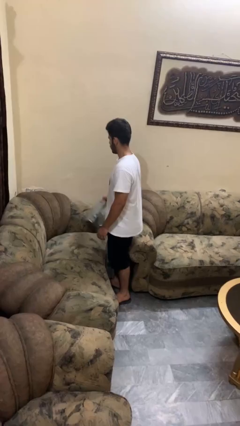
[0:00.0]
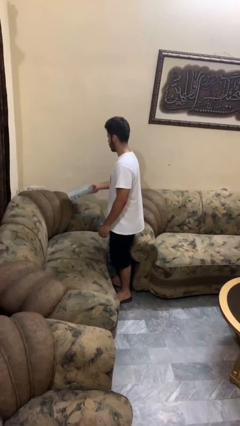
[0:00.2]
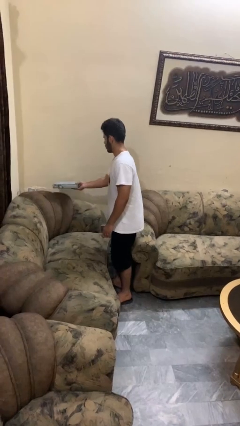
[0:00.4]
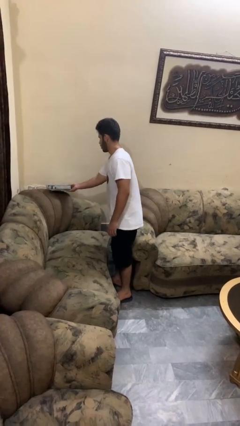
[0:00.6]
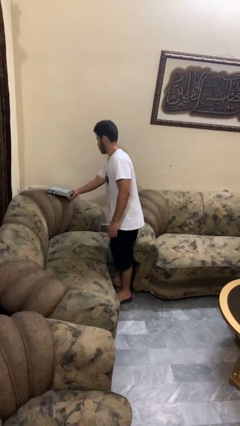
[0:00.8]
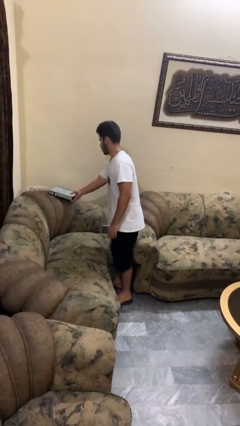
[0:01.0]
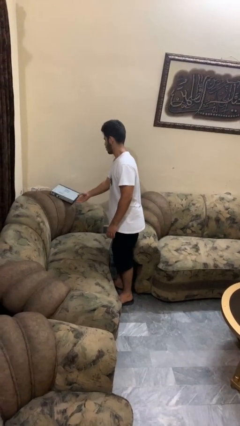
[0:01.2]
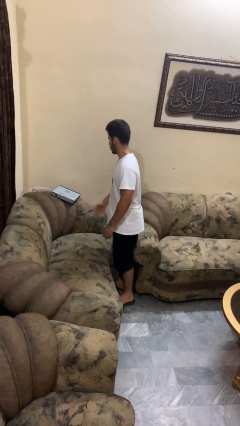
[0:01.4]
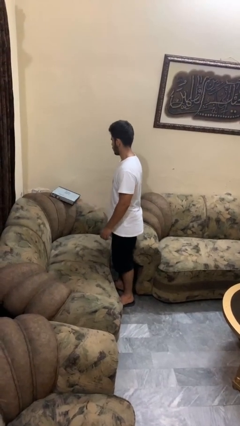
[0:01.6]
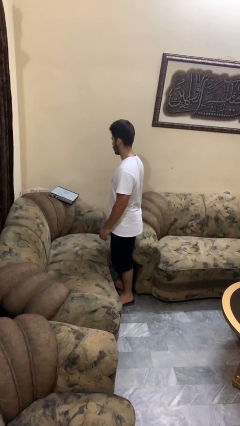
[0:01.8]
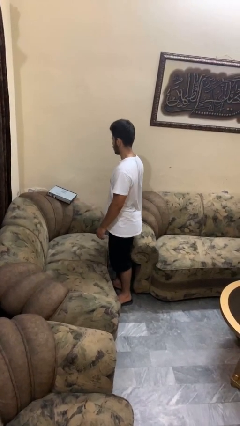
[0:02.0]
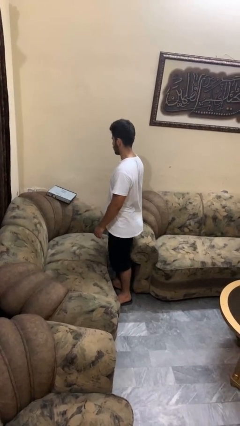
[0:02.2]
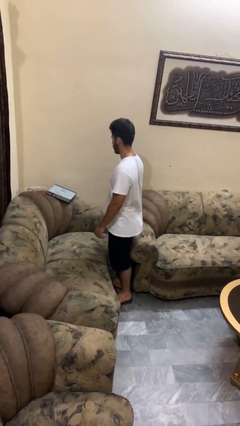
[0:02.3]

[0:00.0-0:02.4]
person puts down object on couch

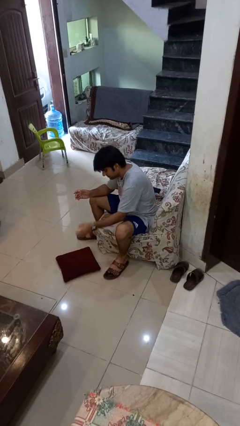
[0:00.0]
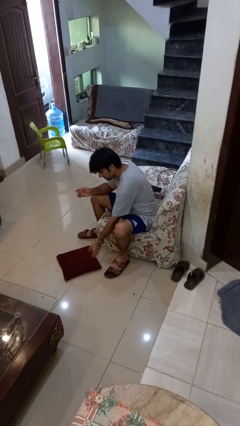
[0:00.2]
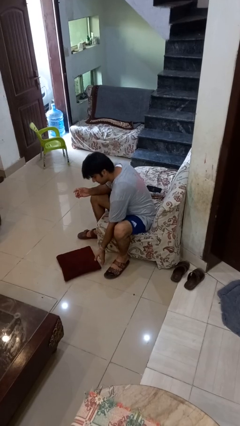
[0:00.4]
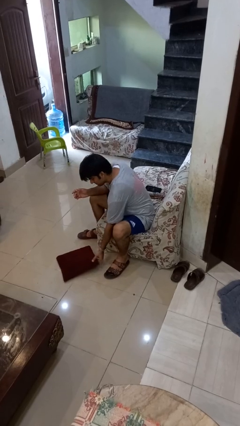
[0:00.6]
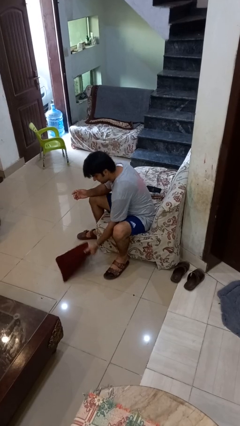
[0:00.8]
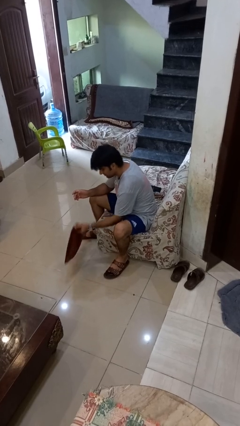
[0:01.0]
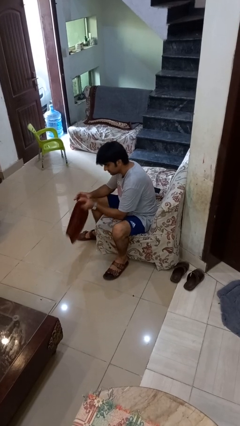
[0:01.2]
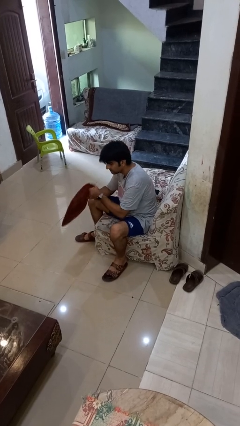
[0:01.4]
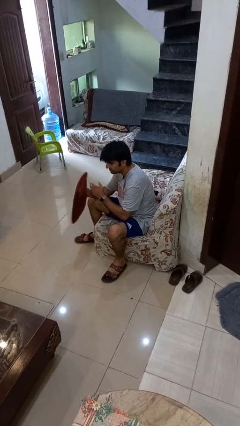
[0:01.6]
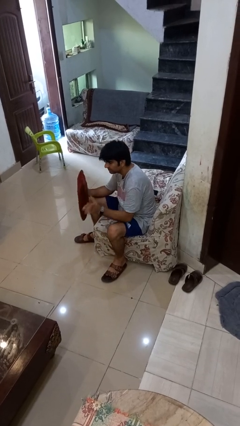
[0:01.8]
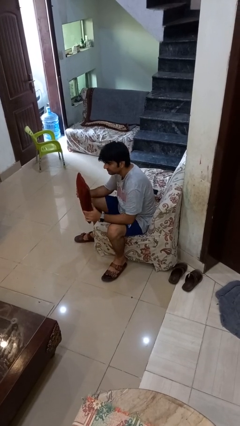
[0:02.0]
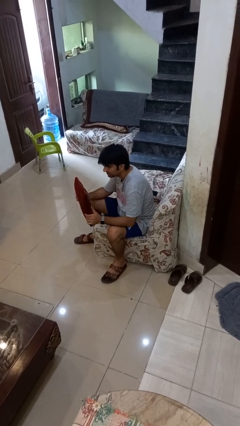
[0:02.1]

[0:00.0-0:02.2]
person picks up object from floor

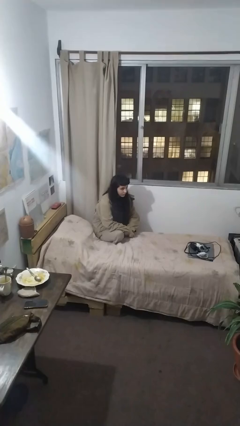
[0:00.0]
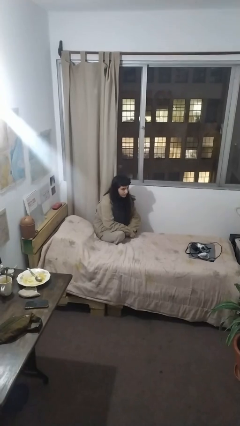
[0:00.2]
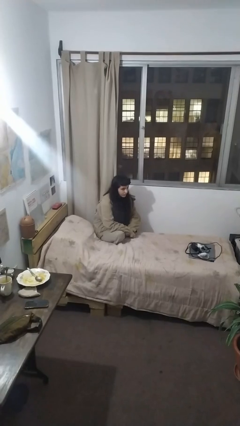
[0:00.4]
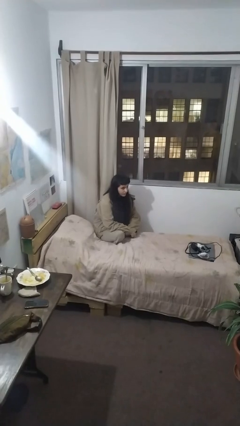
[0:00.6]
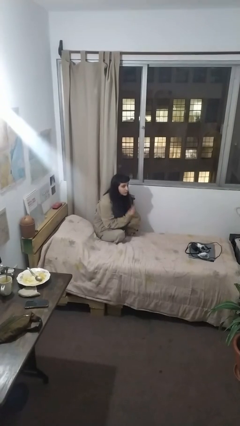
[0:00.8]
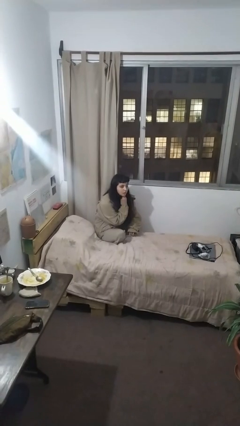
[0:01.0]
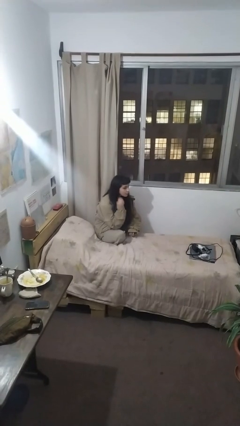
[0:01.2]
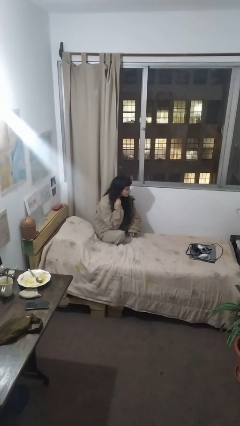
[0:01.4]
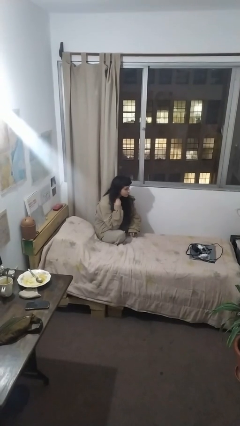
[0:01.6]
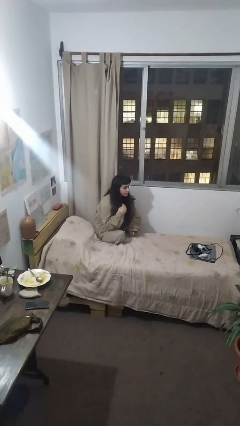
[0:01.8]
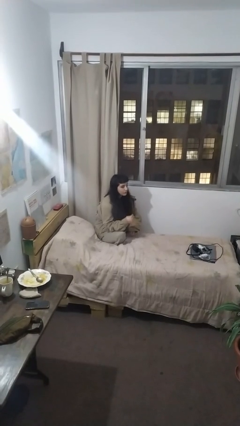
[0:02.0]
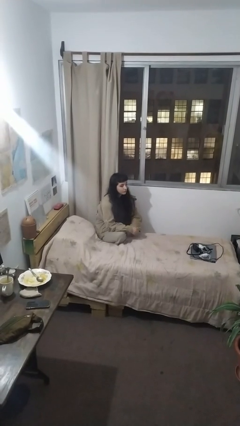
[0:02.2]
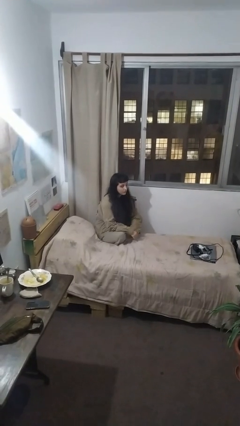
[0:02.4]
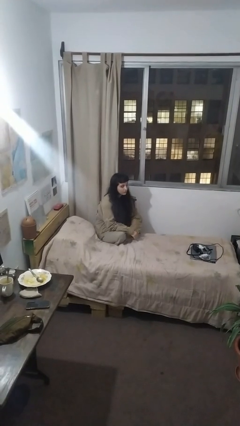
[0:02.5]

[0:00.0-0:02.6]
person gestures cut

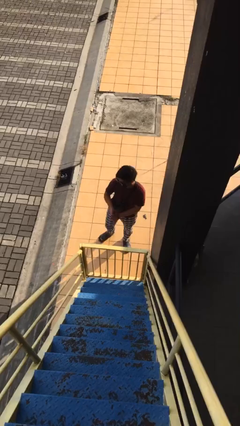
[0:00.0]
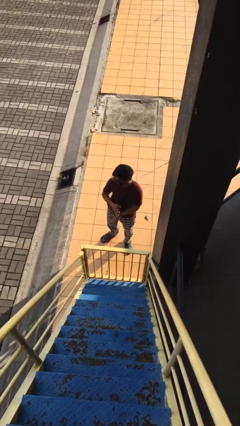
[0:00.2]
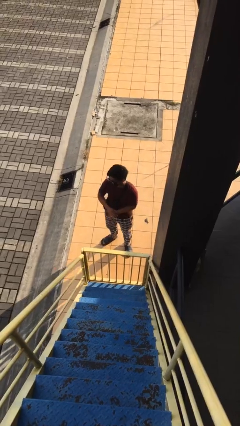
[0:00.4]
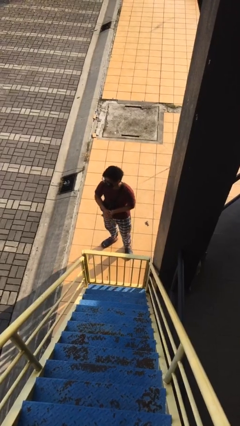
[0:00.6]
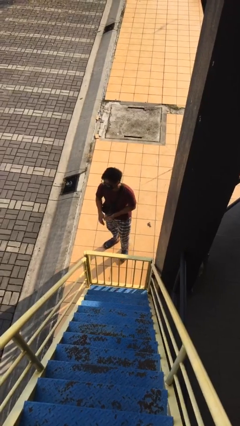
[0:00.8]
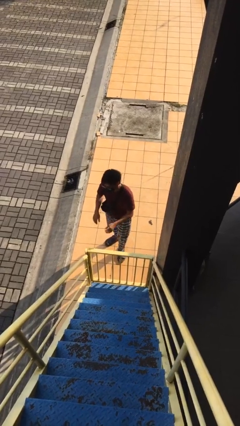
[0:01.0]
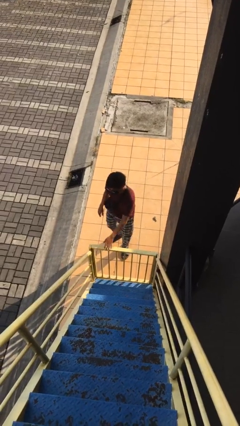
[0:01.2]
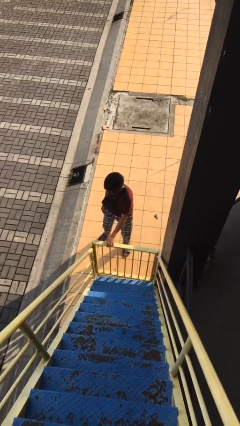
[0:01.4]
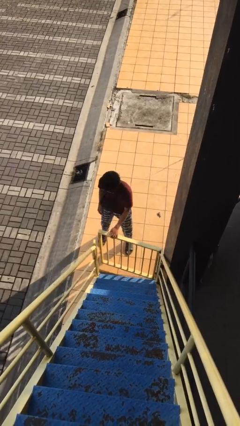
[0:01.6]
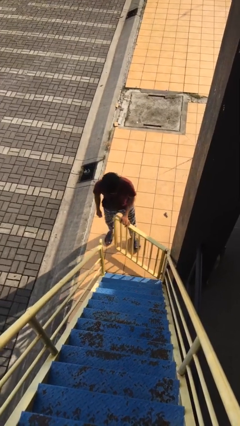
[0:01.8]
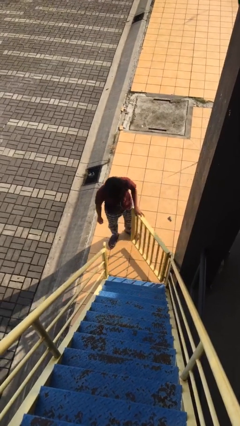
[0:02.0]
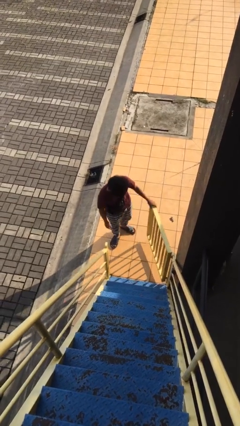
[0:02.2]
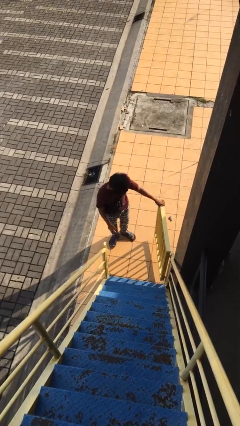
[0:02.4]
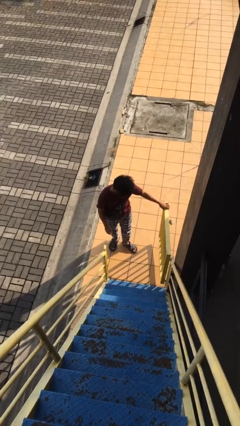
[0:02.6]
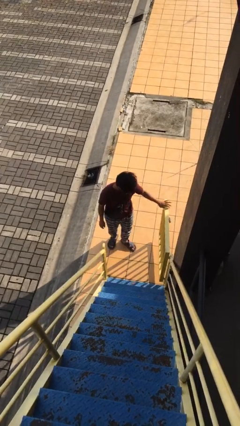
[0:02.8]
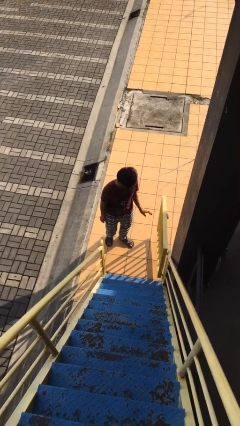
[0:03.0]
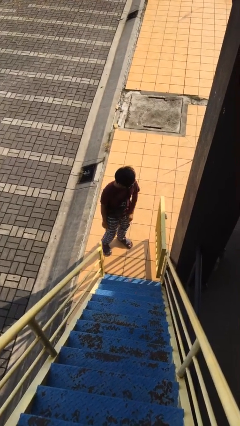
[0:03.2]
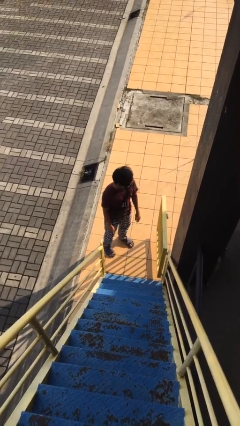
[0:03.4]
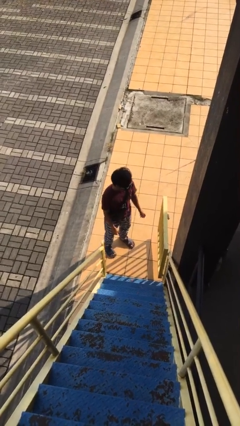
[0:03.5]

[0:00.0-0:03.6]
person opens facility door

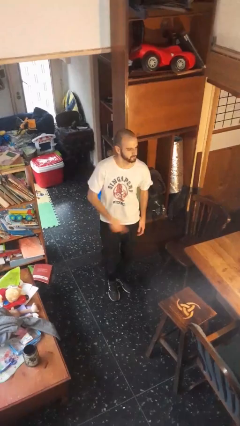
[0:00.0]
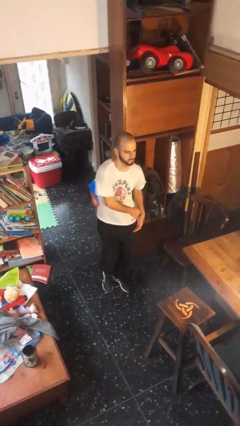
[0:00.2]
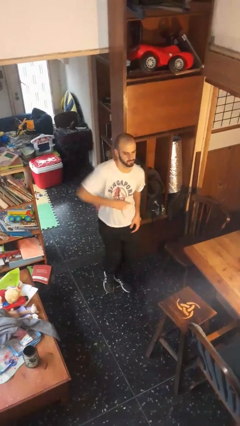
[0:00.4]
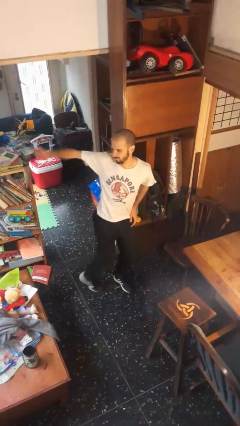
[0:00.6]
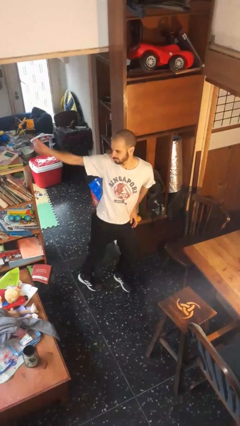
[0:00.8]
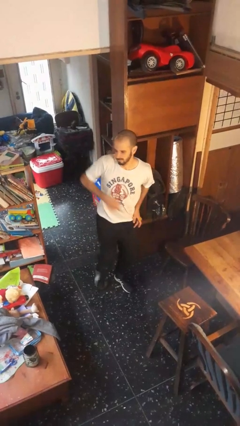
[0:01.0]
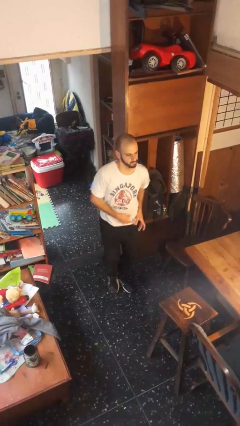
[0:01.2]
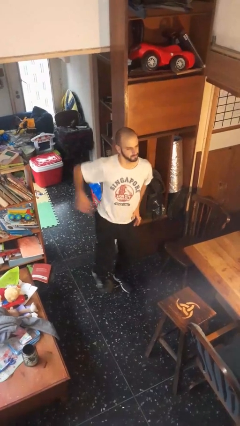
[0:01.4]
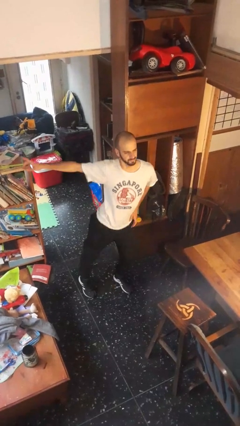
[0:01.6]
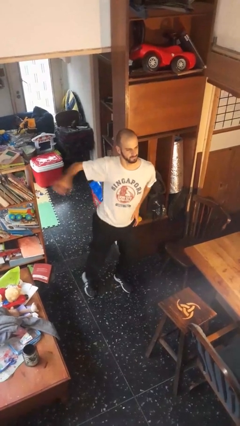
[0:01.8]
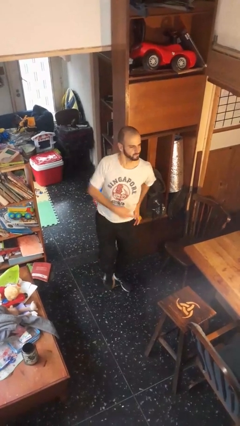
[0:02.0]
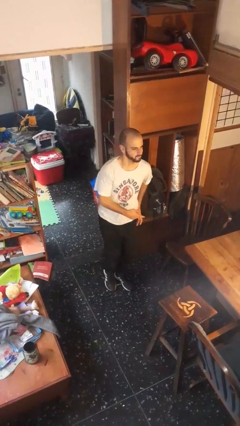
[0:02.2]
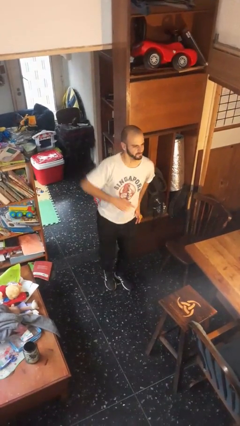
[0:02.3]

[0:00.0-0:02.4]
person dances in place

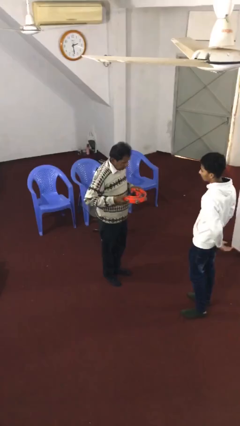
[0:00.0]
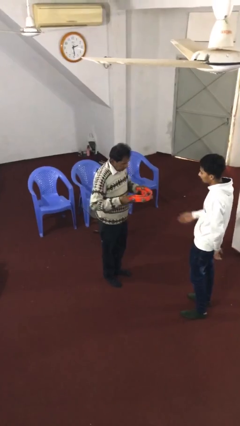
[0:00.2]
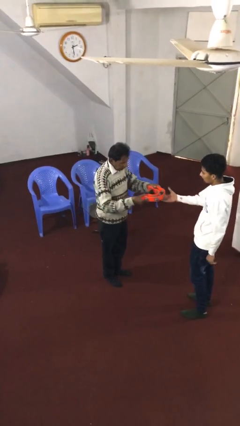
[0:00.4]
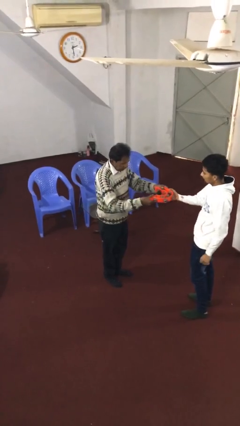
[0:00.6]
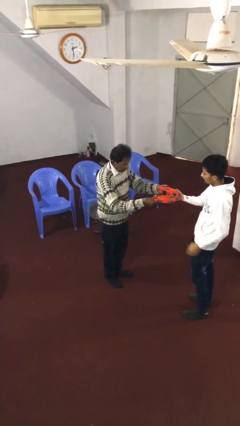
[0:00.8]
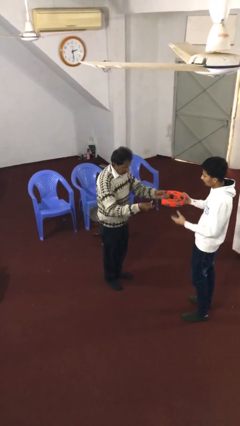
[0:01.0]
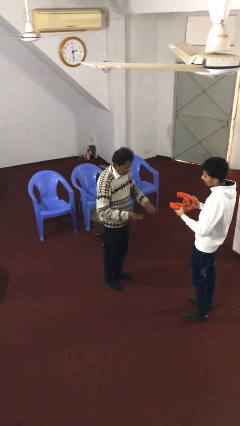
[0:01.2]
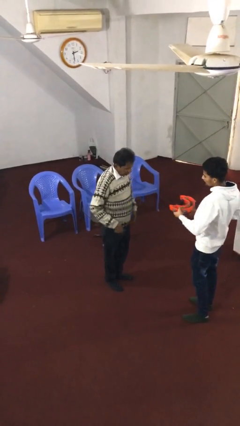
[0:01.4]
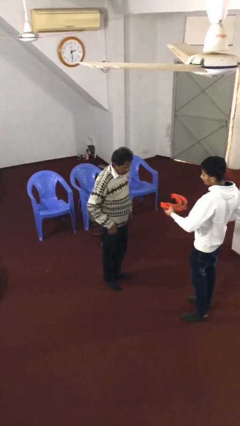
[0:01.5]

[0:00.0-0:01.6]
person transfers object to person

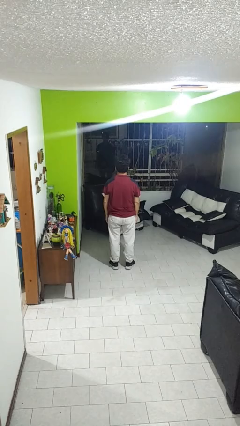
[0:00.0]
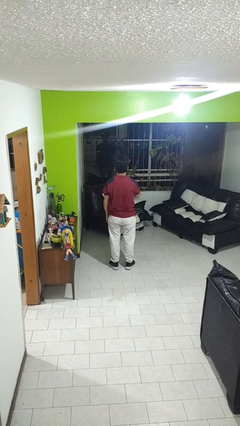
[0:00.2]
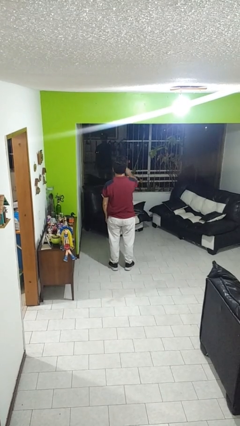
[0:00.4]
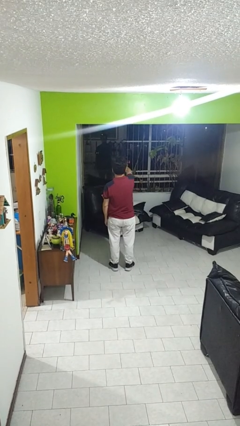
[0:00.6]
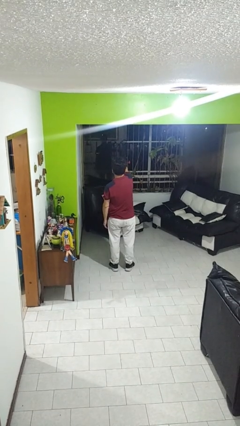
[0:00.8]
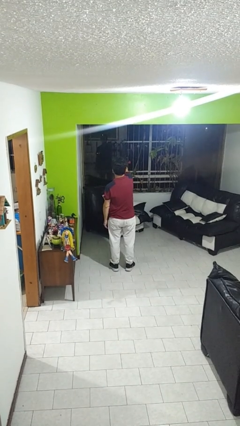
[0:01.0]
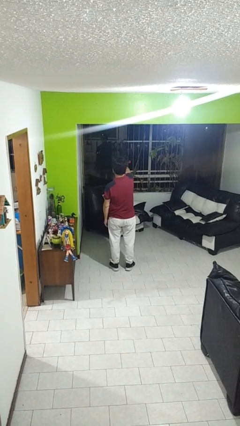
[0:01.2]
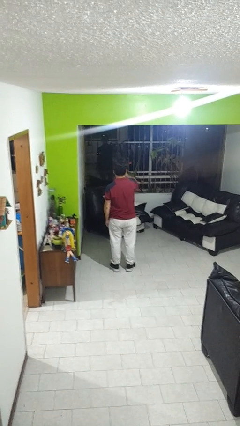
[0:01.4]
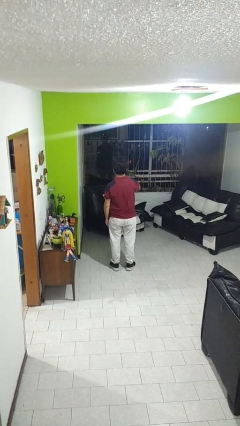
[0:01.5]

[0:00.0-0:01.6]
person points at person

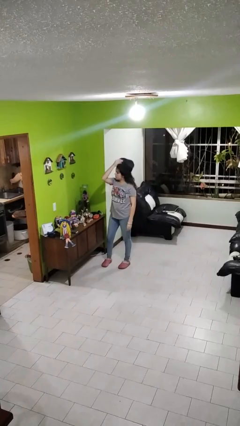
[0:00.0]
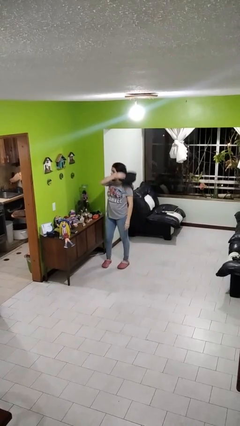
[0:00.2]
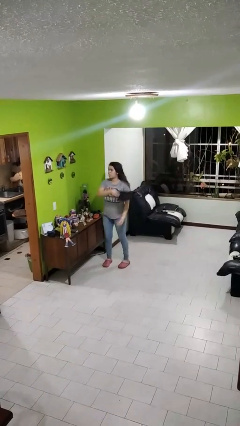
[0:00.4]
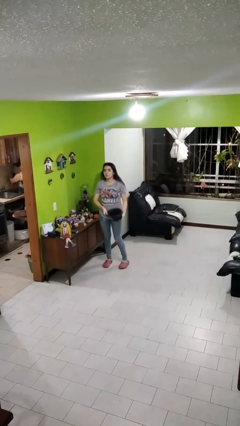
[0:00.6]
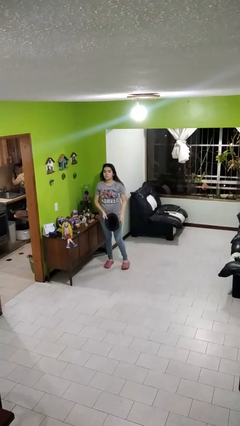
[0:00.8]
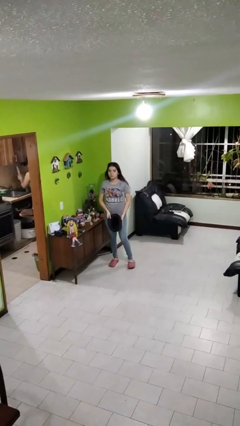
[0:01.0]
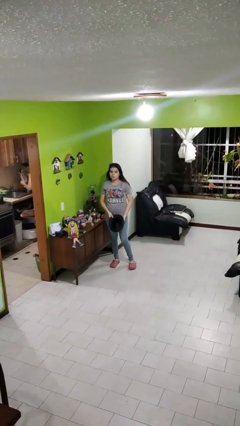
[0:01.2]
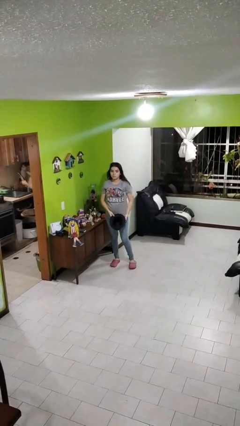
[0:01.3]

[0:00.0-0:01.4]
person takes off hat
